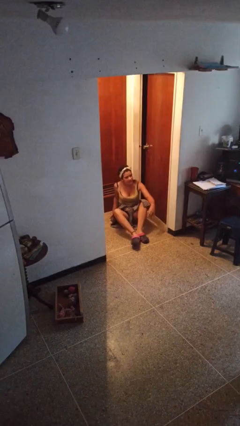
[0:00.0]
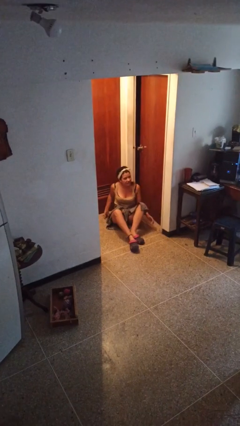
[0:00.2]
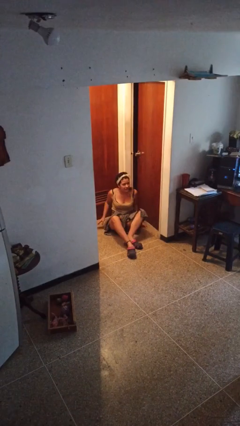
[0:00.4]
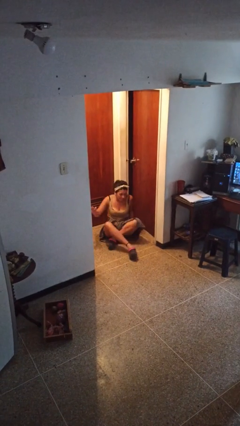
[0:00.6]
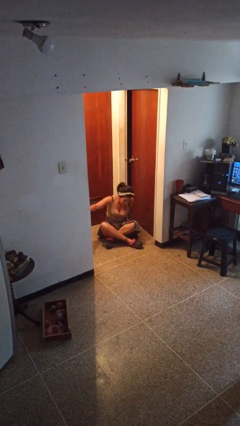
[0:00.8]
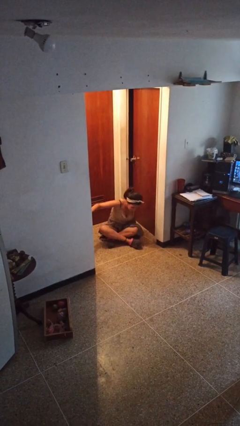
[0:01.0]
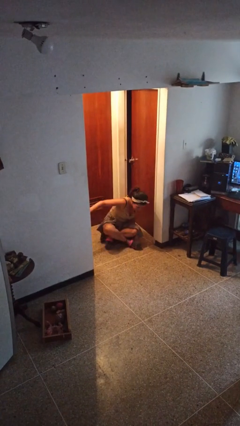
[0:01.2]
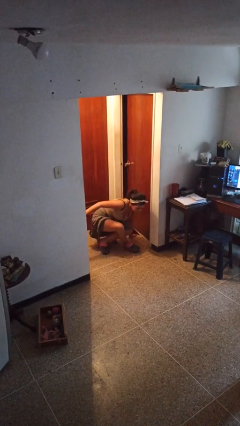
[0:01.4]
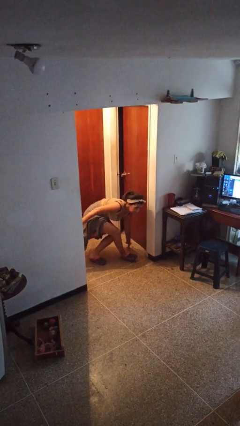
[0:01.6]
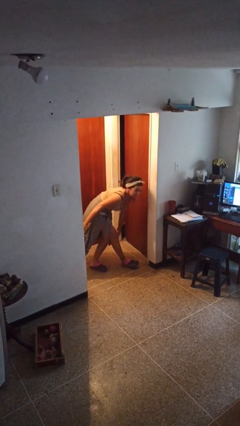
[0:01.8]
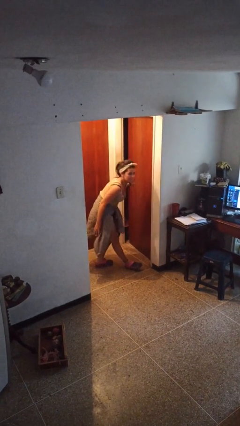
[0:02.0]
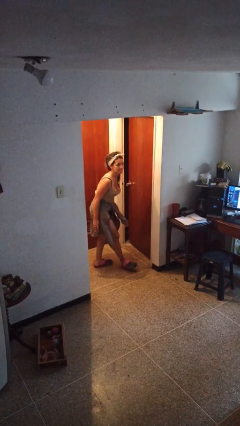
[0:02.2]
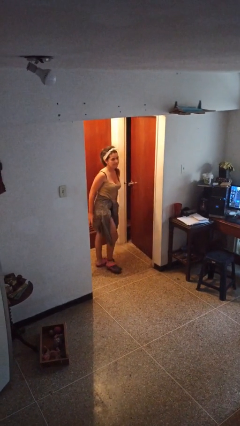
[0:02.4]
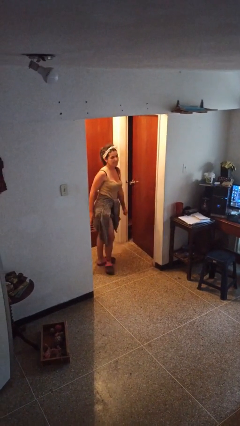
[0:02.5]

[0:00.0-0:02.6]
person stands up

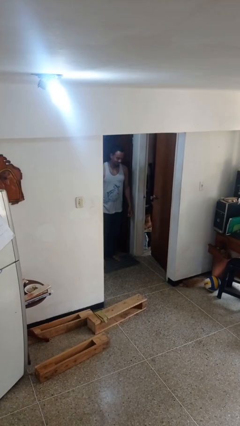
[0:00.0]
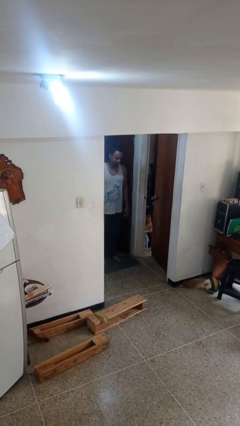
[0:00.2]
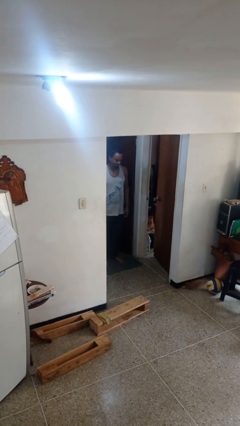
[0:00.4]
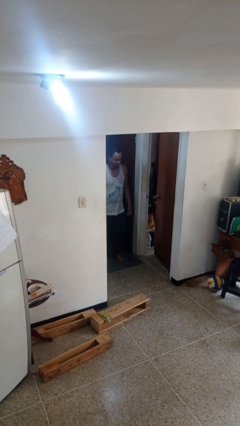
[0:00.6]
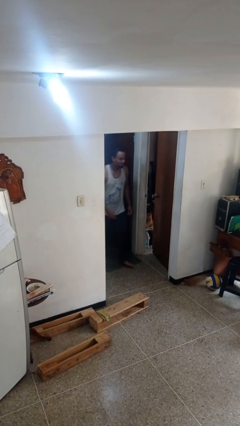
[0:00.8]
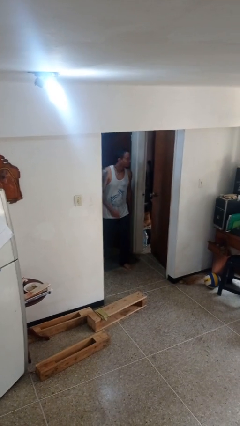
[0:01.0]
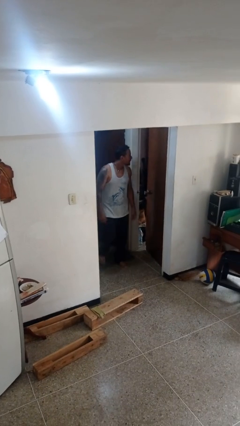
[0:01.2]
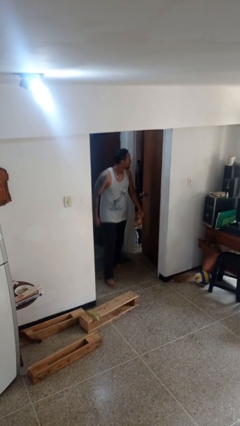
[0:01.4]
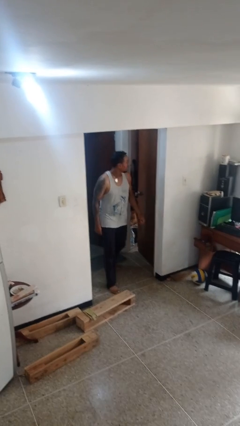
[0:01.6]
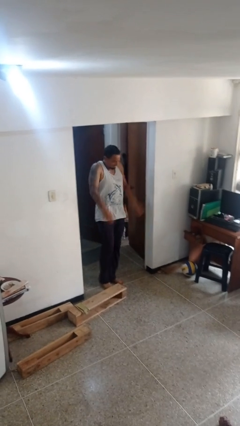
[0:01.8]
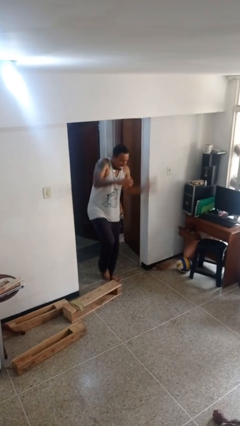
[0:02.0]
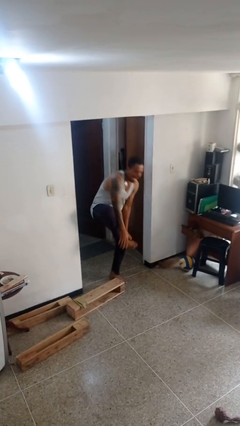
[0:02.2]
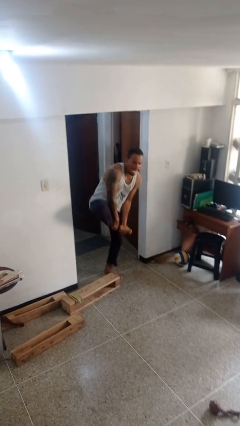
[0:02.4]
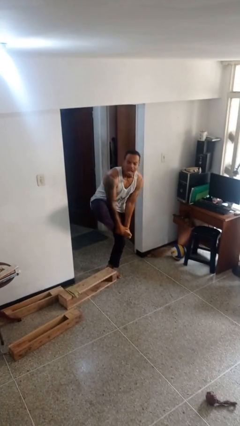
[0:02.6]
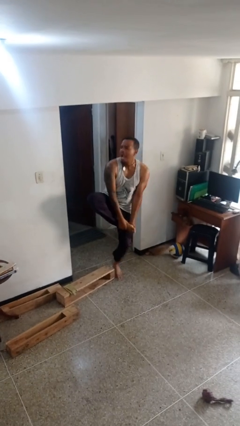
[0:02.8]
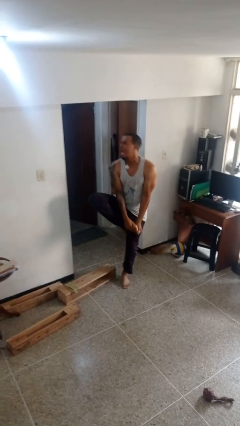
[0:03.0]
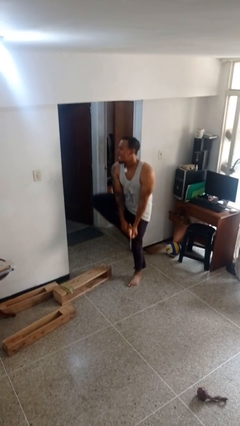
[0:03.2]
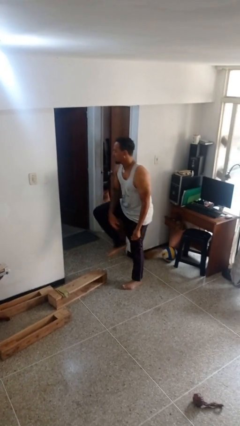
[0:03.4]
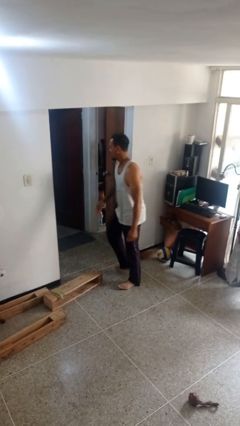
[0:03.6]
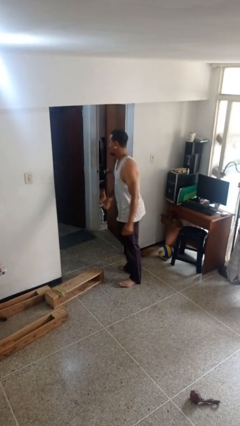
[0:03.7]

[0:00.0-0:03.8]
person stubs toe

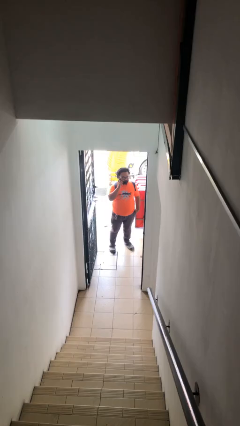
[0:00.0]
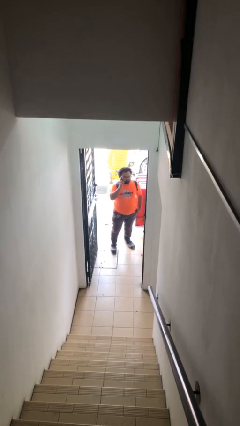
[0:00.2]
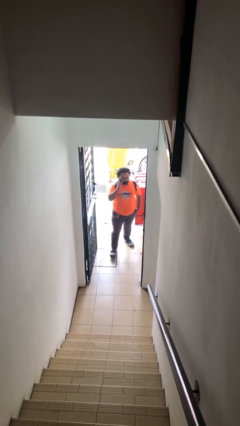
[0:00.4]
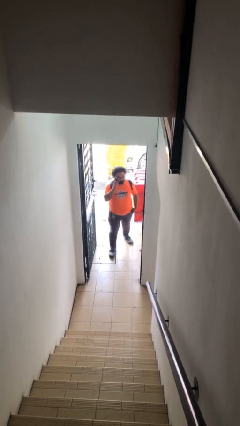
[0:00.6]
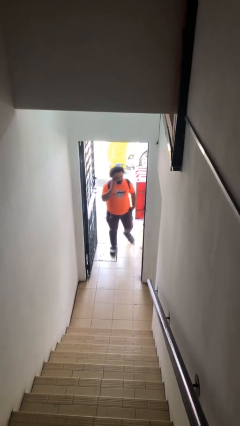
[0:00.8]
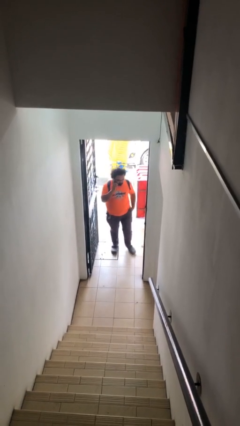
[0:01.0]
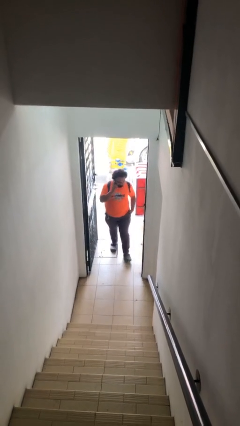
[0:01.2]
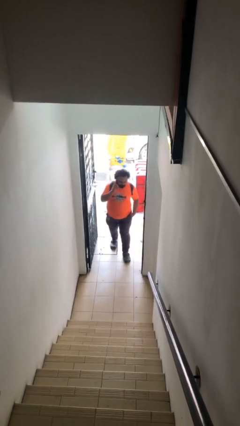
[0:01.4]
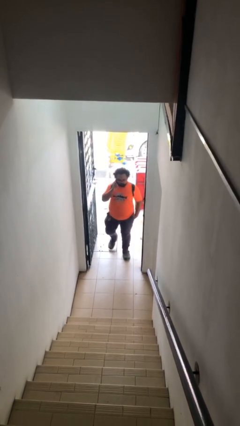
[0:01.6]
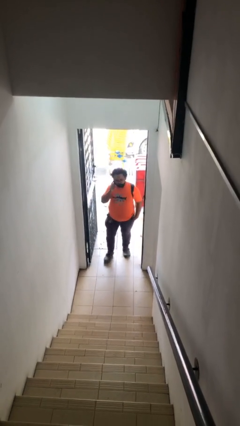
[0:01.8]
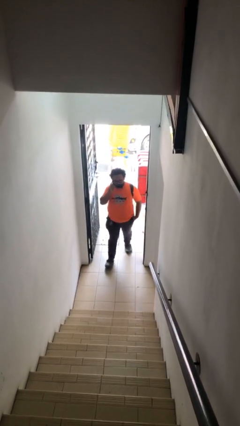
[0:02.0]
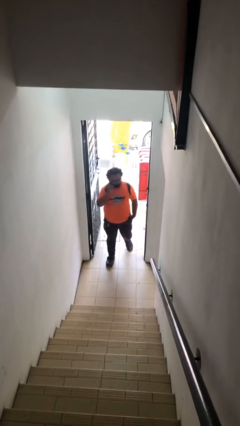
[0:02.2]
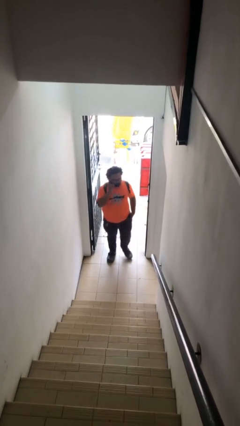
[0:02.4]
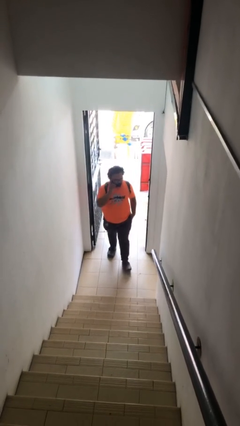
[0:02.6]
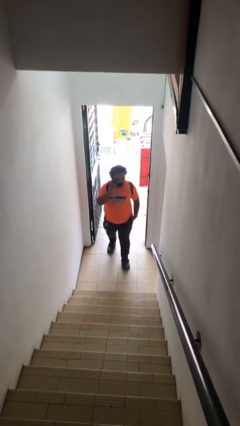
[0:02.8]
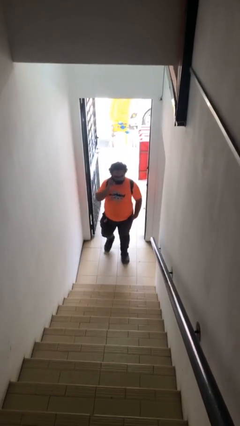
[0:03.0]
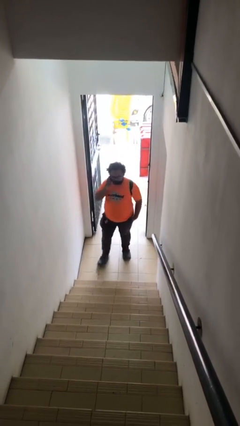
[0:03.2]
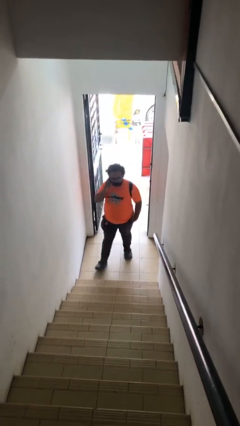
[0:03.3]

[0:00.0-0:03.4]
person enters scene through structure

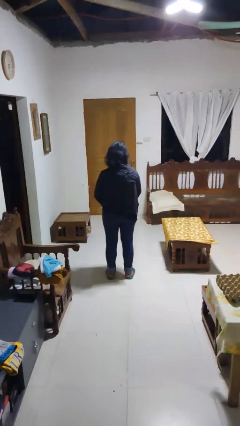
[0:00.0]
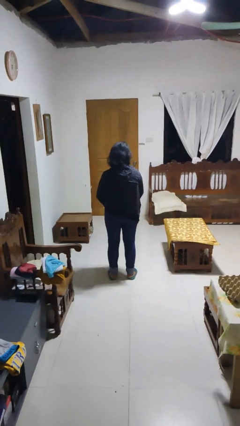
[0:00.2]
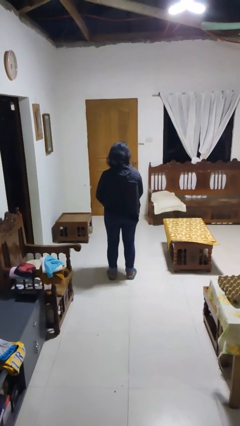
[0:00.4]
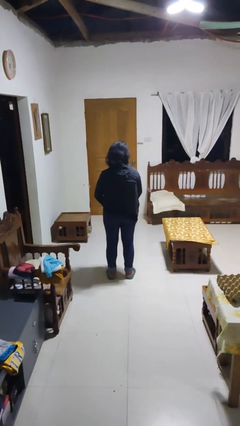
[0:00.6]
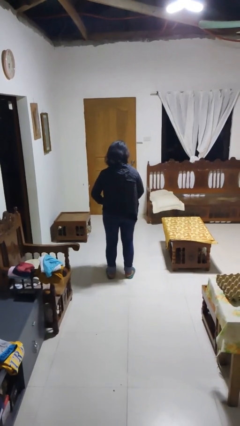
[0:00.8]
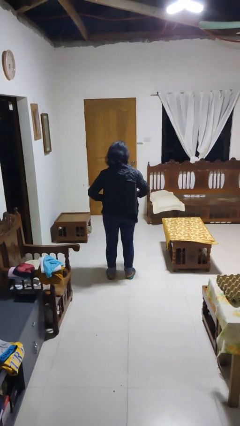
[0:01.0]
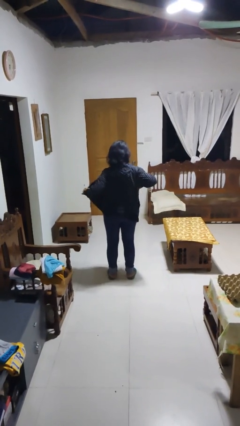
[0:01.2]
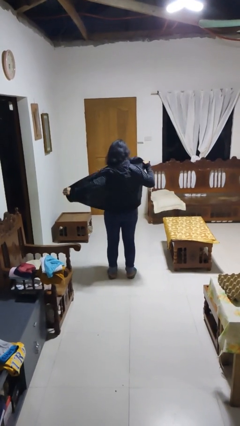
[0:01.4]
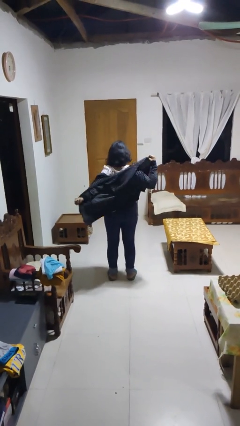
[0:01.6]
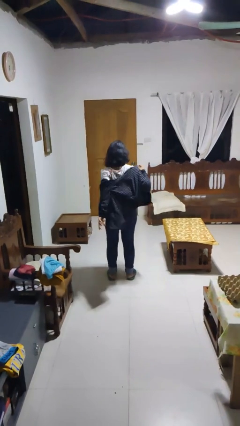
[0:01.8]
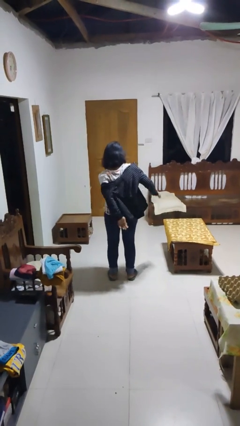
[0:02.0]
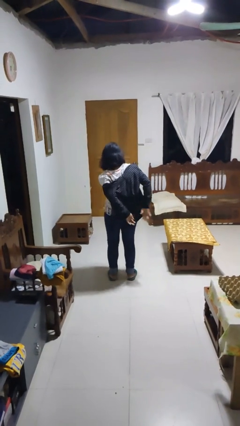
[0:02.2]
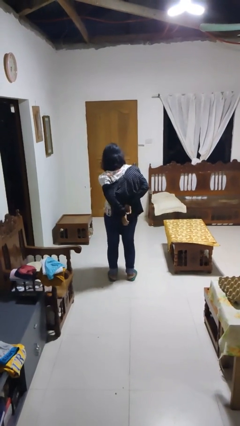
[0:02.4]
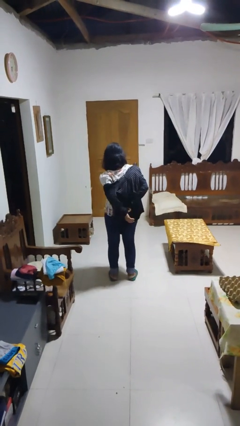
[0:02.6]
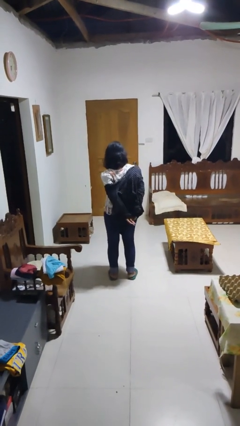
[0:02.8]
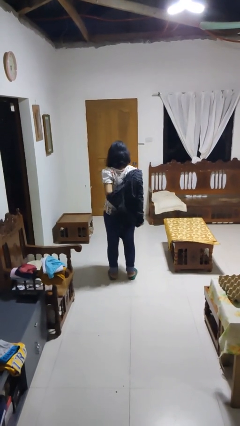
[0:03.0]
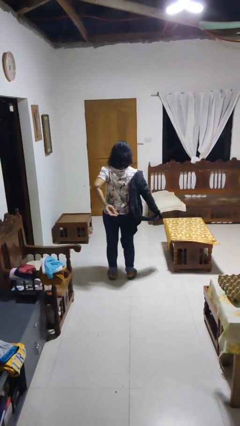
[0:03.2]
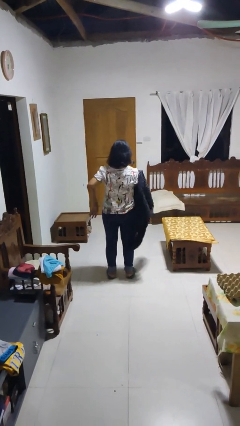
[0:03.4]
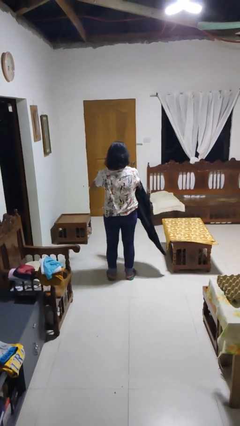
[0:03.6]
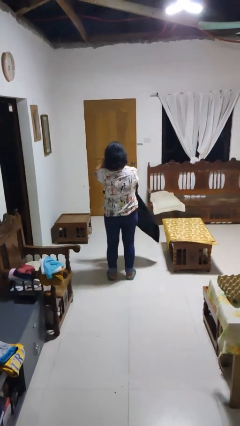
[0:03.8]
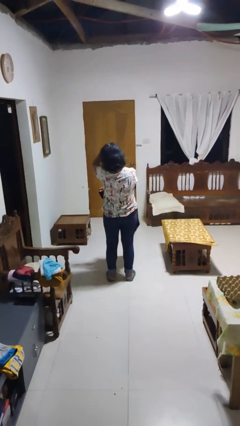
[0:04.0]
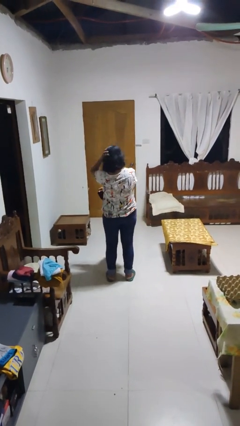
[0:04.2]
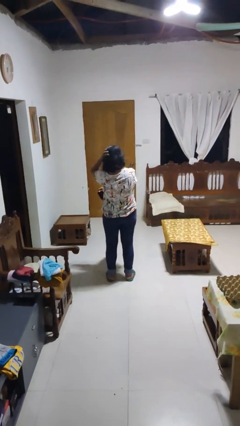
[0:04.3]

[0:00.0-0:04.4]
person takes off jacket

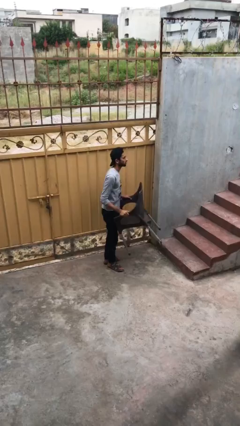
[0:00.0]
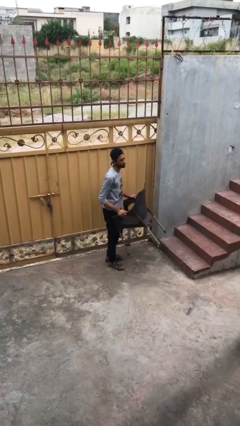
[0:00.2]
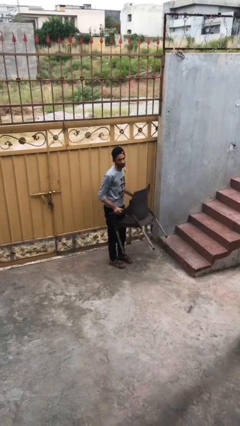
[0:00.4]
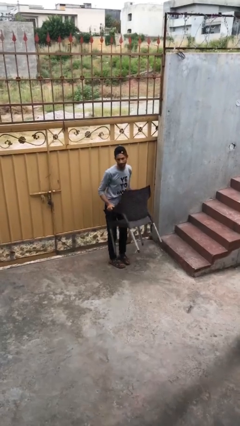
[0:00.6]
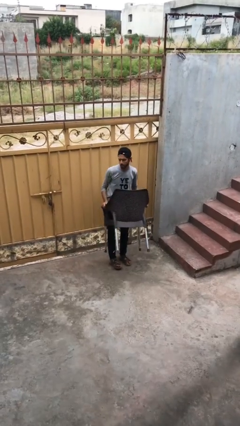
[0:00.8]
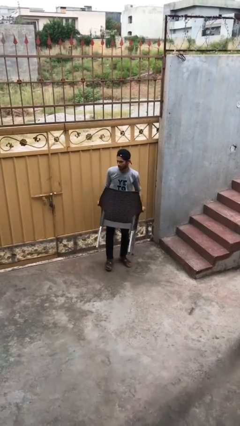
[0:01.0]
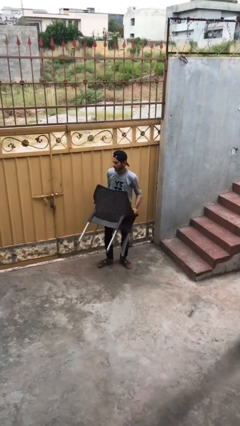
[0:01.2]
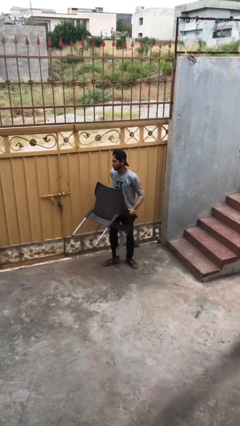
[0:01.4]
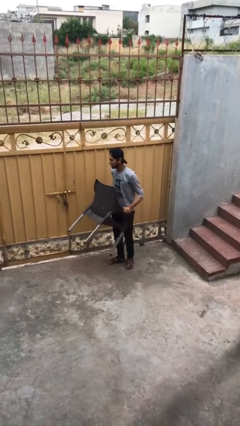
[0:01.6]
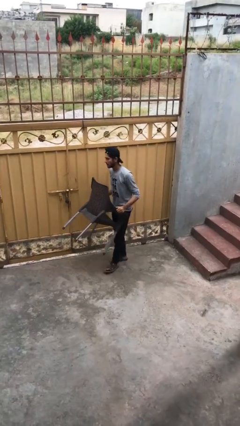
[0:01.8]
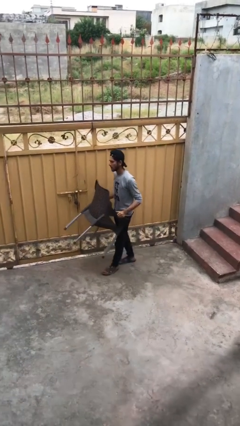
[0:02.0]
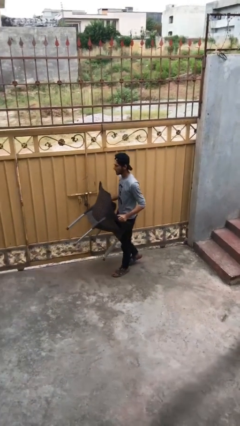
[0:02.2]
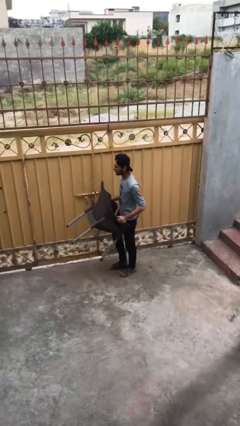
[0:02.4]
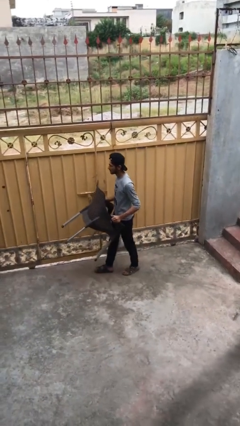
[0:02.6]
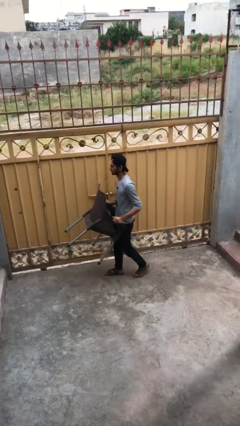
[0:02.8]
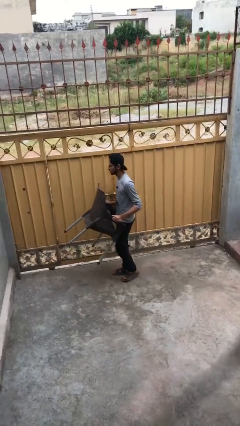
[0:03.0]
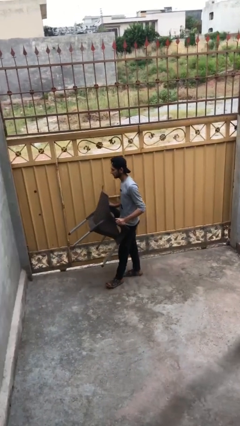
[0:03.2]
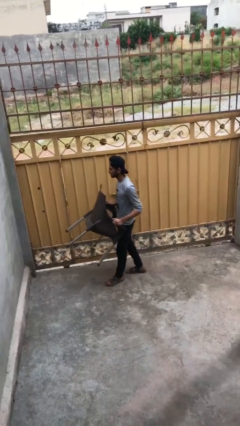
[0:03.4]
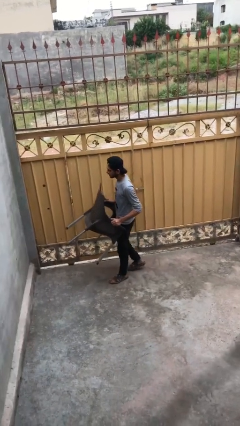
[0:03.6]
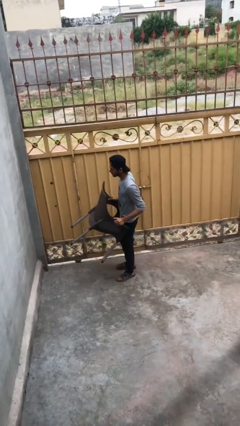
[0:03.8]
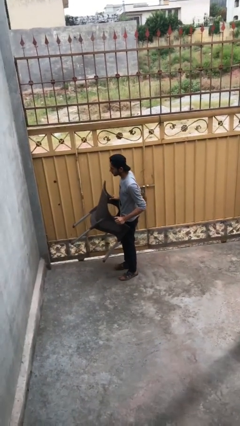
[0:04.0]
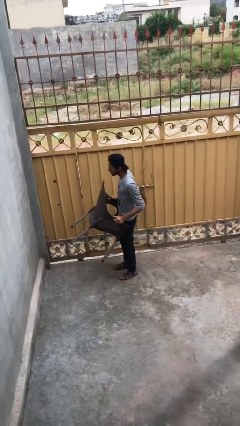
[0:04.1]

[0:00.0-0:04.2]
person carries heavy object
